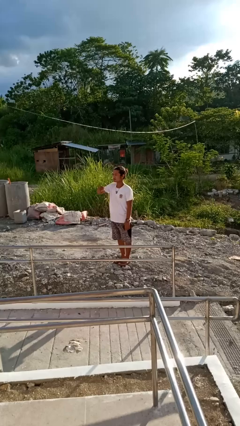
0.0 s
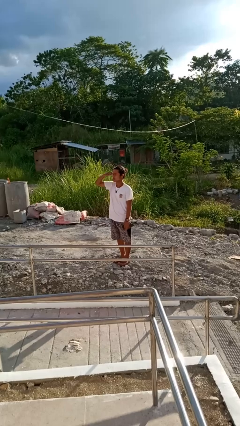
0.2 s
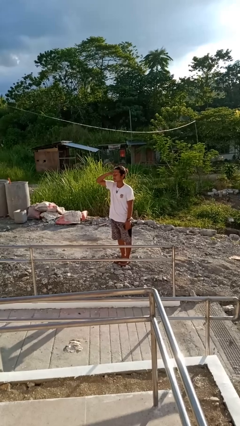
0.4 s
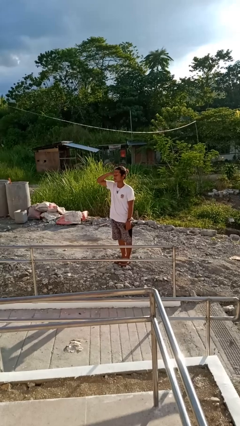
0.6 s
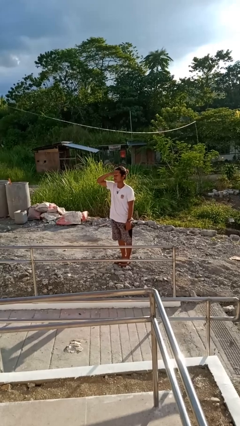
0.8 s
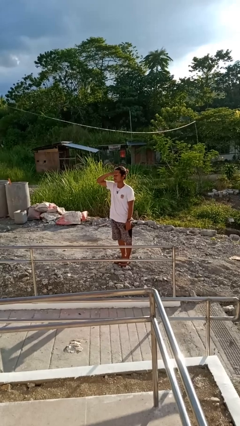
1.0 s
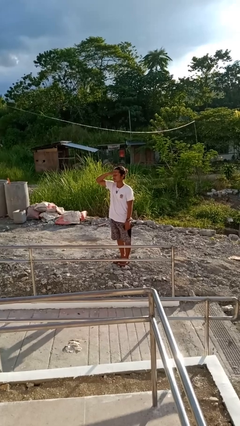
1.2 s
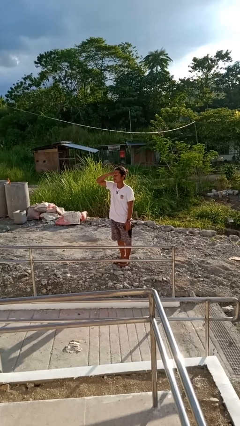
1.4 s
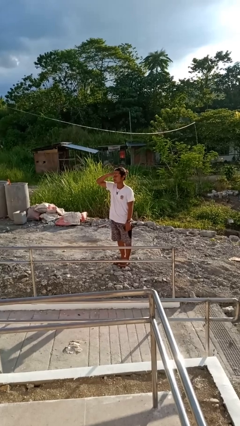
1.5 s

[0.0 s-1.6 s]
person shades eyes

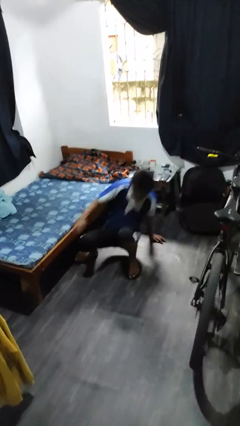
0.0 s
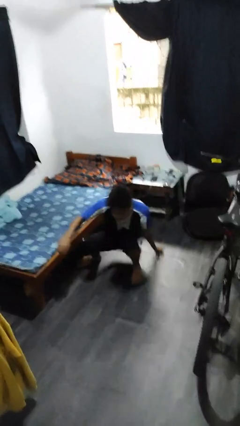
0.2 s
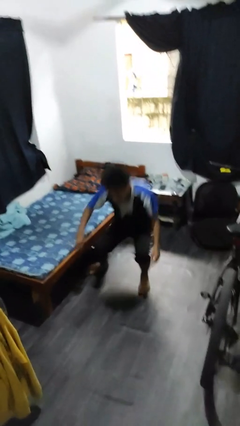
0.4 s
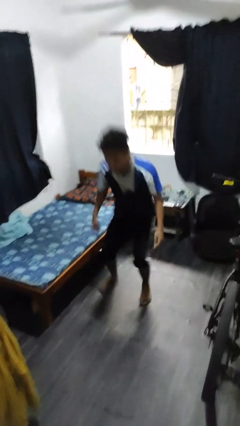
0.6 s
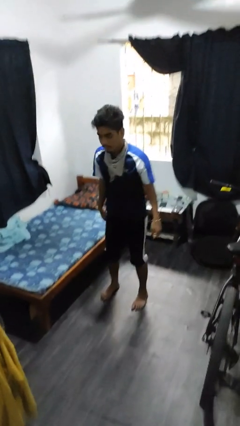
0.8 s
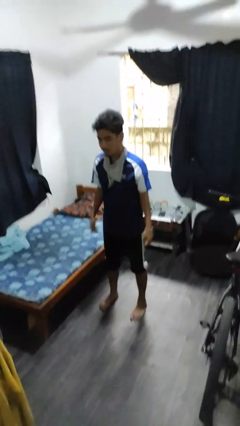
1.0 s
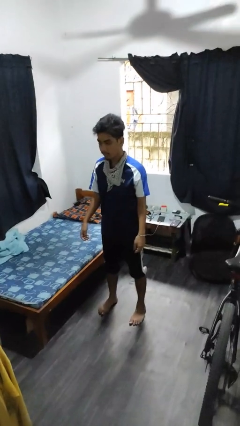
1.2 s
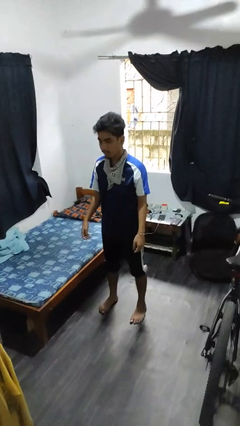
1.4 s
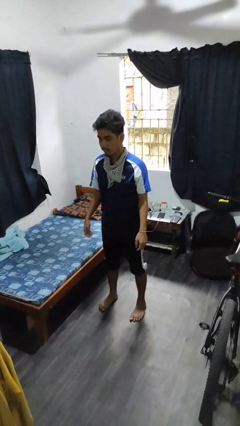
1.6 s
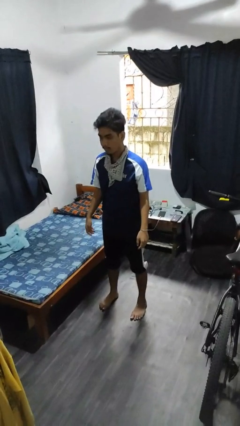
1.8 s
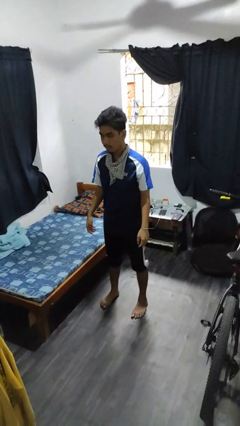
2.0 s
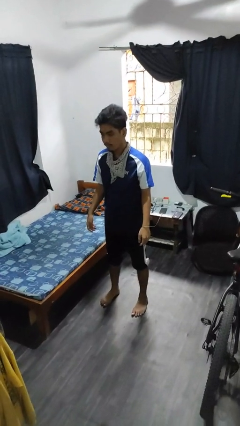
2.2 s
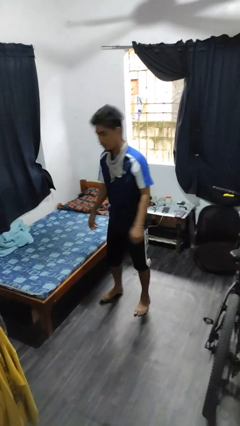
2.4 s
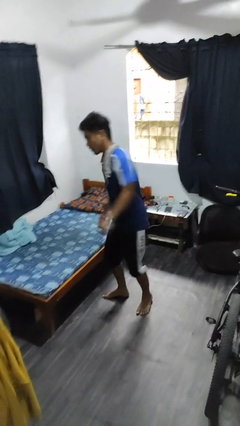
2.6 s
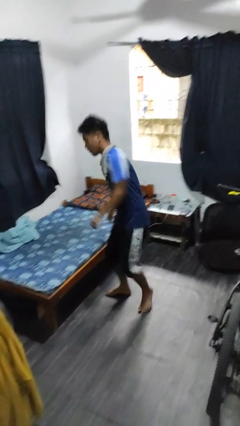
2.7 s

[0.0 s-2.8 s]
person stands up from floor

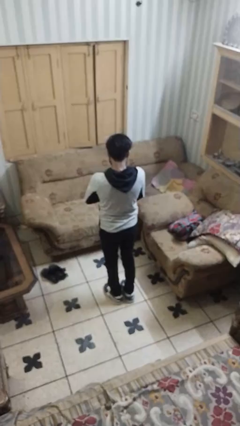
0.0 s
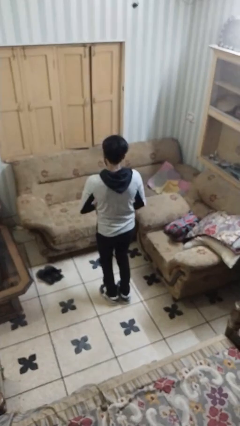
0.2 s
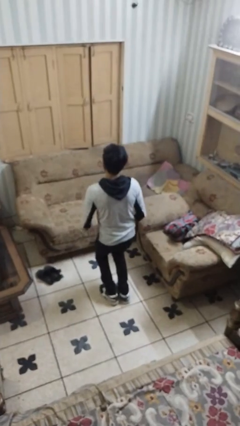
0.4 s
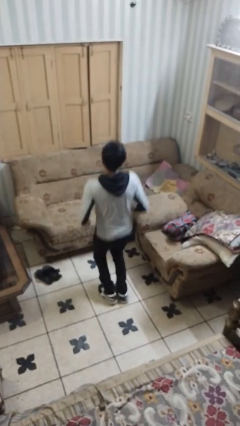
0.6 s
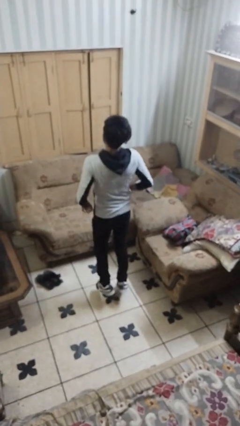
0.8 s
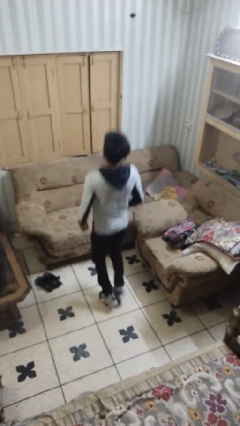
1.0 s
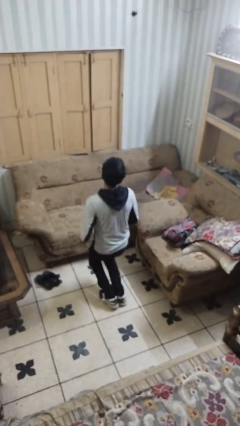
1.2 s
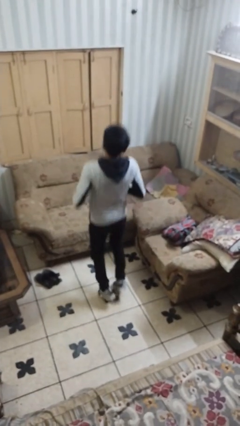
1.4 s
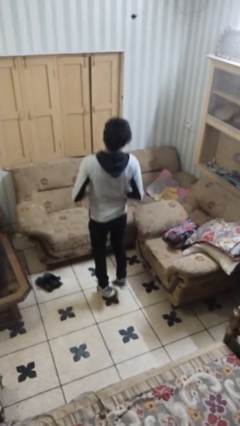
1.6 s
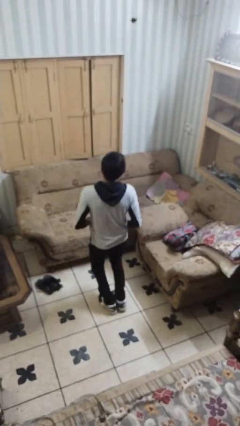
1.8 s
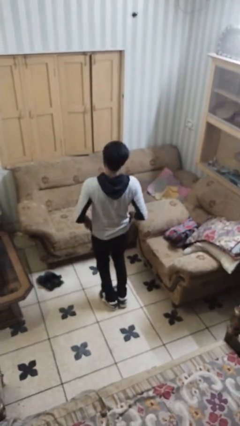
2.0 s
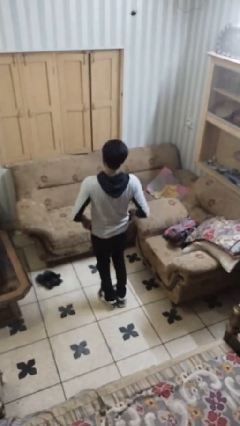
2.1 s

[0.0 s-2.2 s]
person jumps

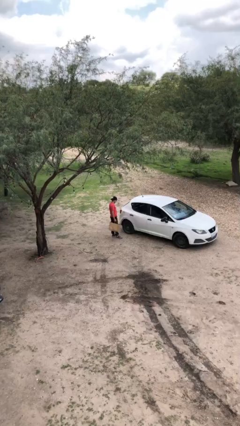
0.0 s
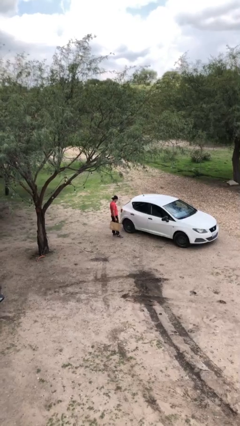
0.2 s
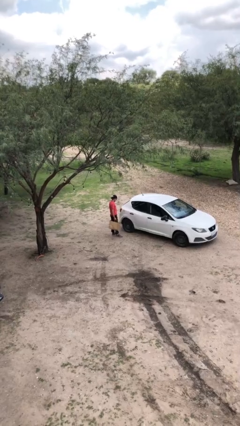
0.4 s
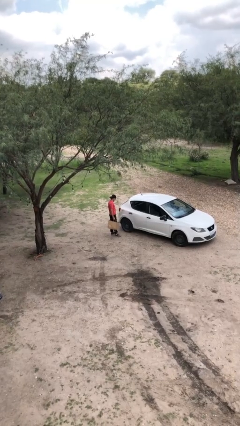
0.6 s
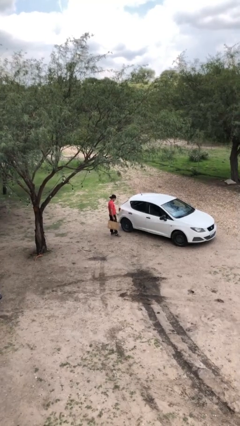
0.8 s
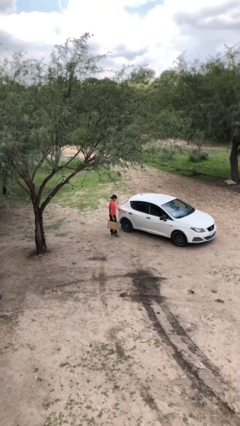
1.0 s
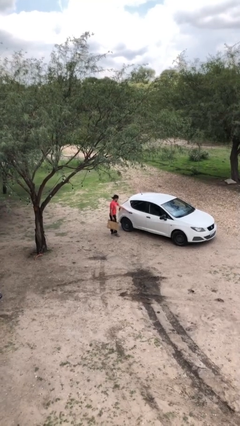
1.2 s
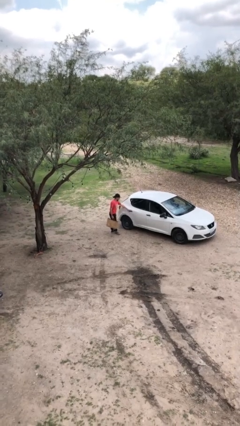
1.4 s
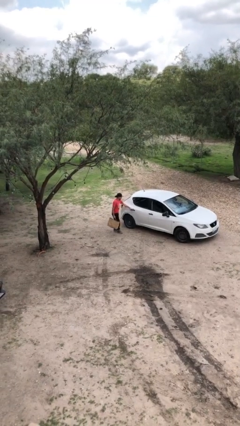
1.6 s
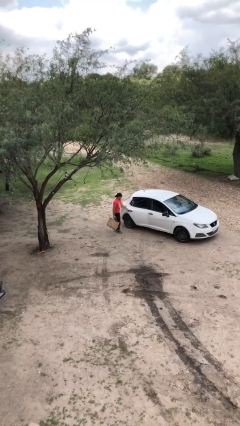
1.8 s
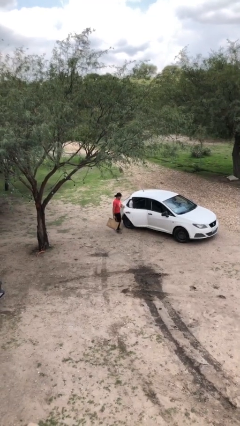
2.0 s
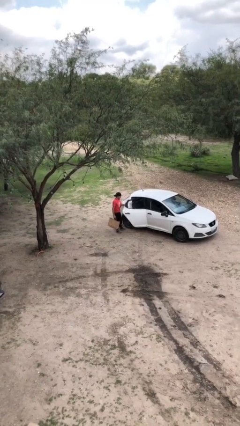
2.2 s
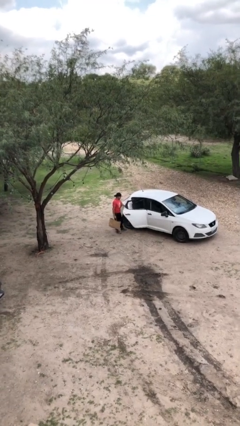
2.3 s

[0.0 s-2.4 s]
person opens car door

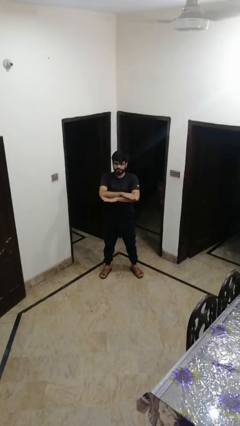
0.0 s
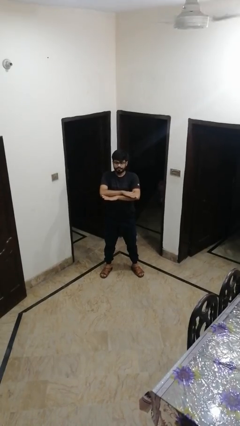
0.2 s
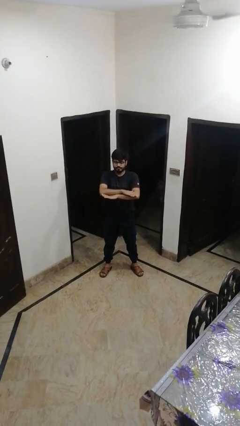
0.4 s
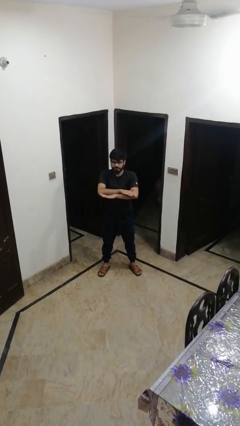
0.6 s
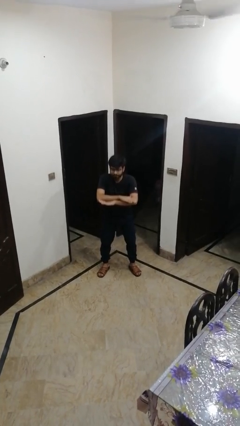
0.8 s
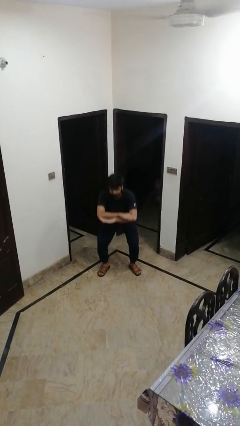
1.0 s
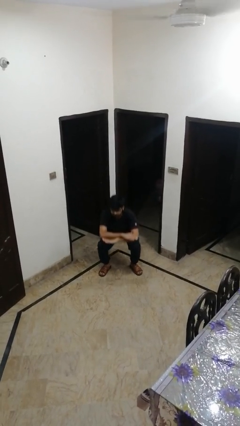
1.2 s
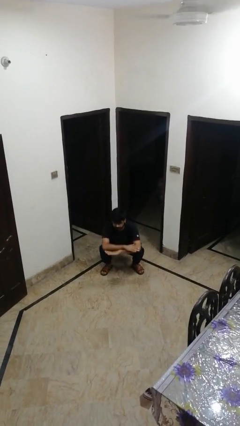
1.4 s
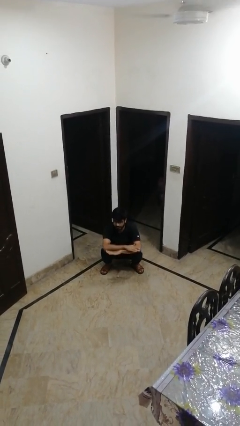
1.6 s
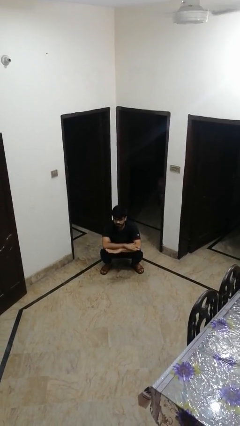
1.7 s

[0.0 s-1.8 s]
person squats

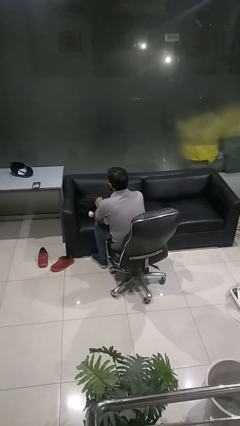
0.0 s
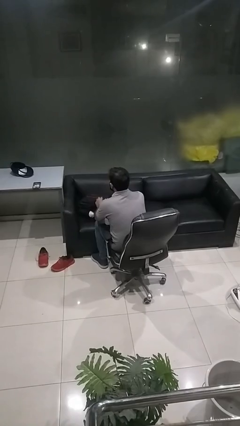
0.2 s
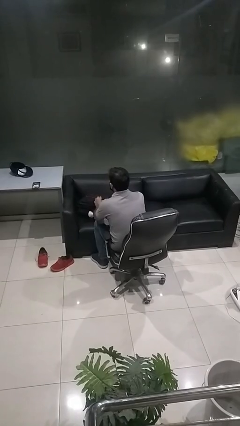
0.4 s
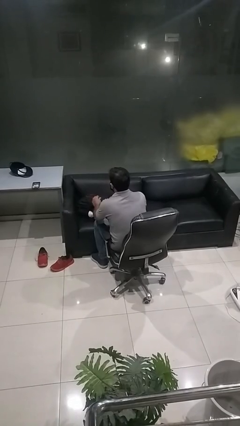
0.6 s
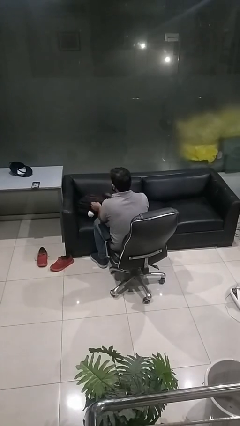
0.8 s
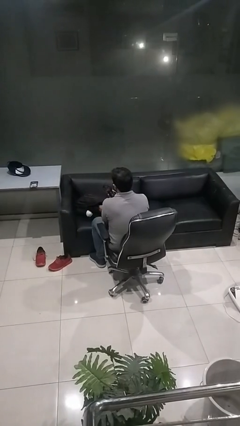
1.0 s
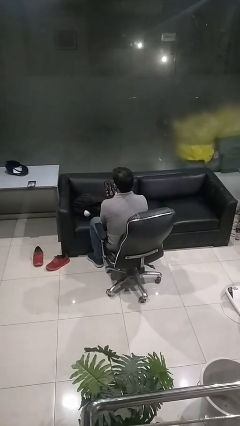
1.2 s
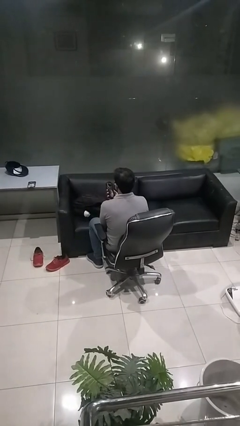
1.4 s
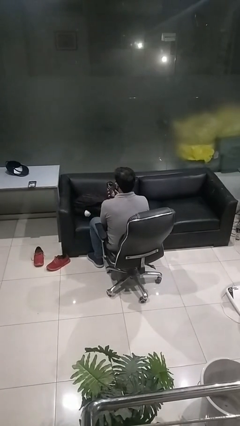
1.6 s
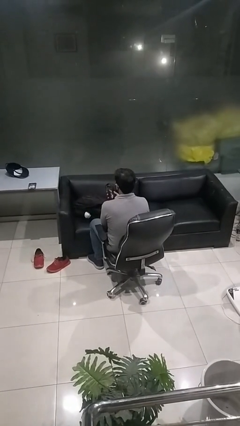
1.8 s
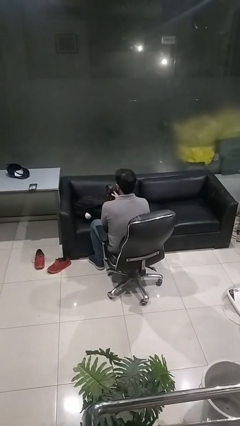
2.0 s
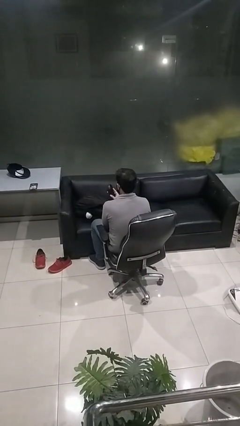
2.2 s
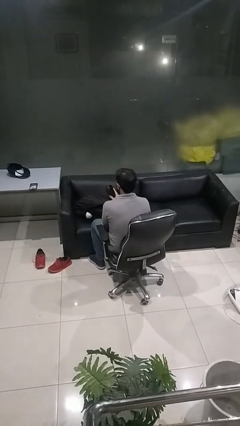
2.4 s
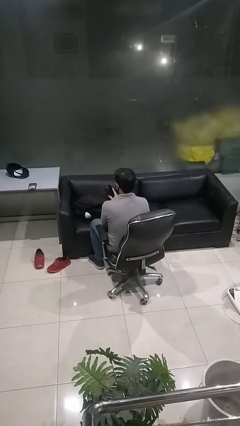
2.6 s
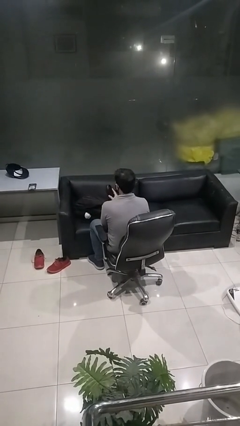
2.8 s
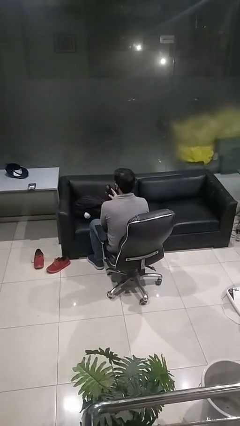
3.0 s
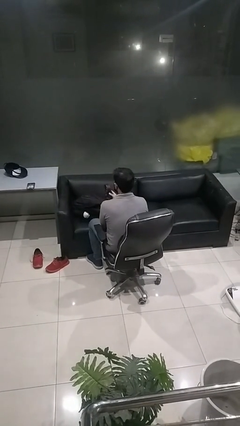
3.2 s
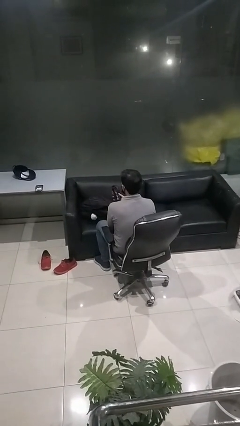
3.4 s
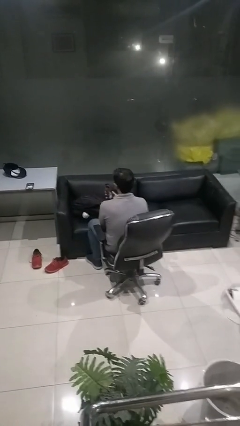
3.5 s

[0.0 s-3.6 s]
person takes object from backpack

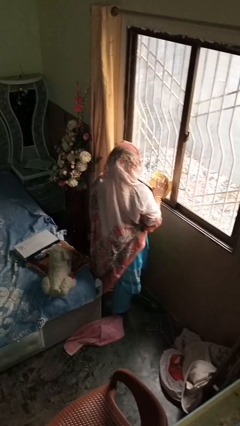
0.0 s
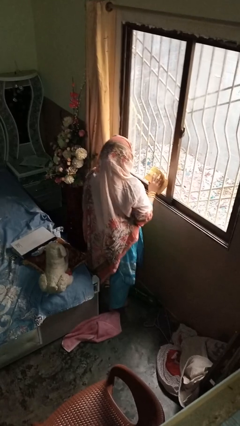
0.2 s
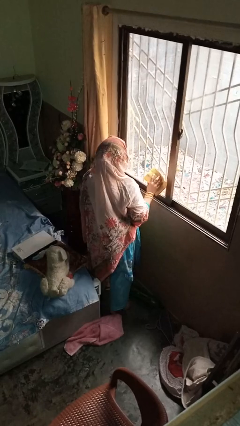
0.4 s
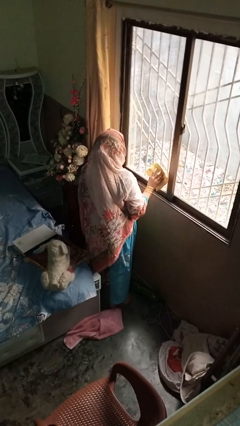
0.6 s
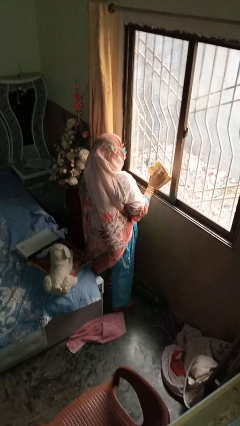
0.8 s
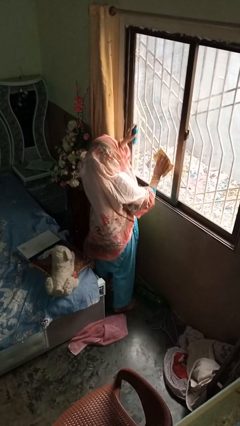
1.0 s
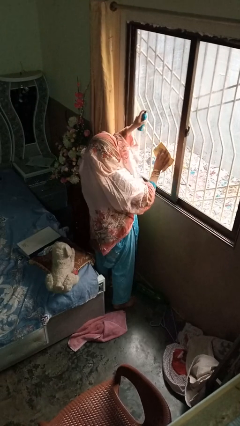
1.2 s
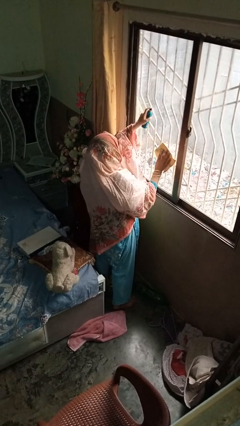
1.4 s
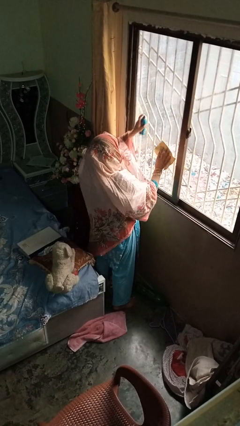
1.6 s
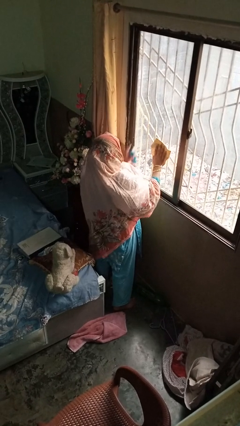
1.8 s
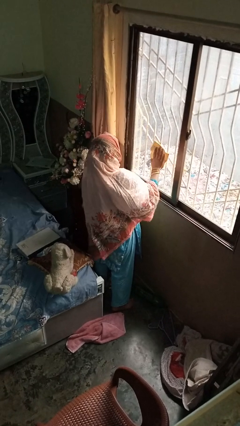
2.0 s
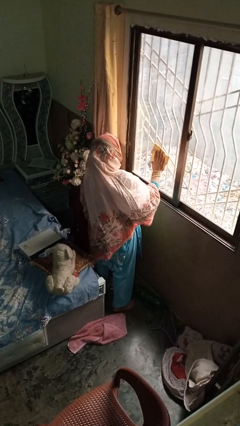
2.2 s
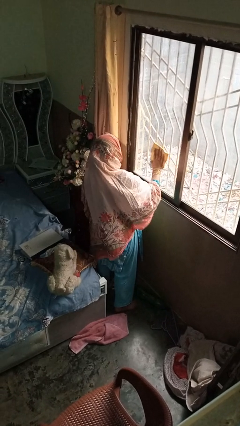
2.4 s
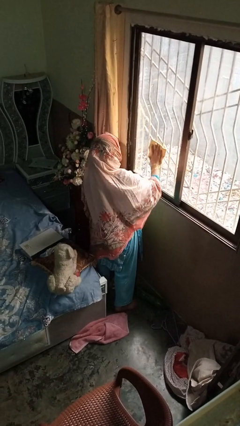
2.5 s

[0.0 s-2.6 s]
person sprays from bottle

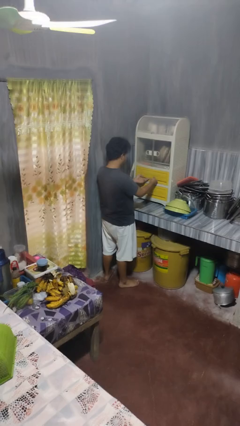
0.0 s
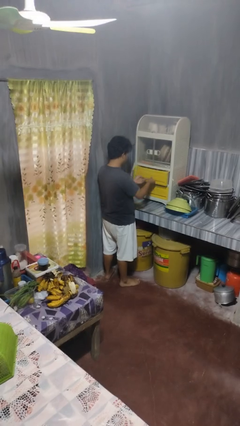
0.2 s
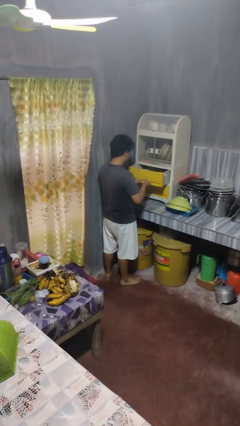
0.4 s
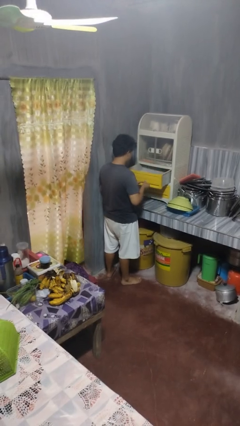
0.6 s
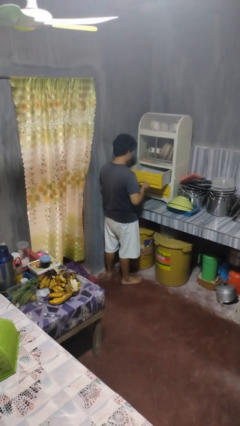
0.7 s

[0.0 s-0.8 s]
person opens kitchen drawer
